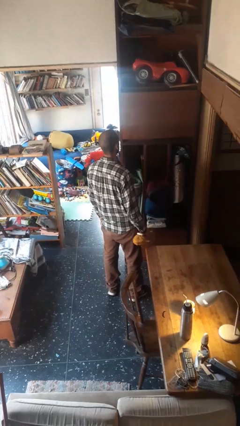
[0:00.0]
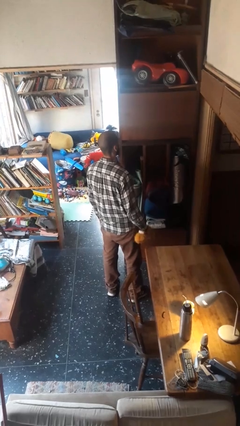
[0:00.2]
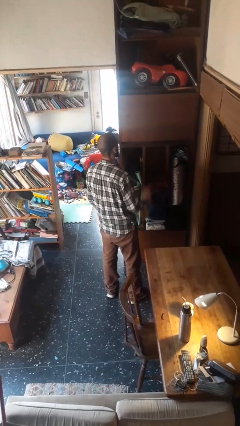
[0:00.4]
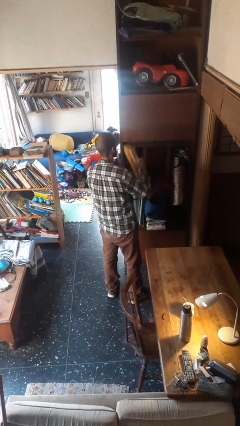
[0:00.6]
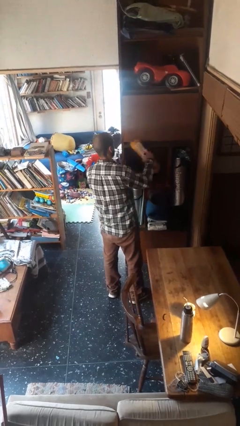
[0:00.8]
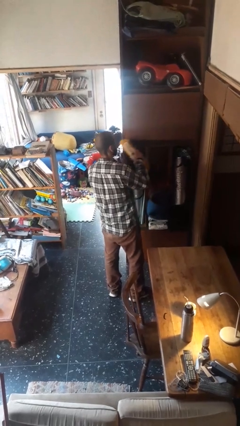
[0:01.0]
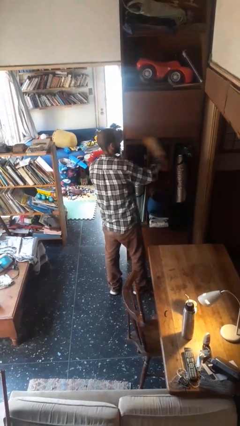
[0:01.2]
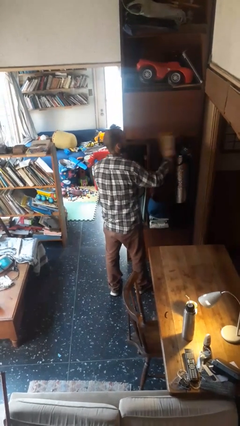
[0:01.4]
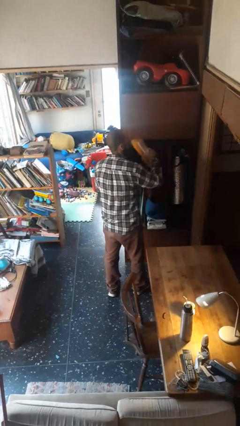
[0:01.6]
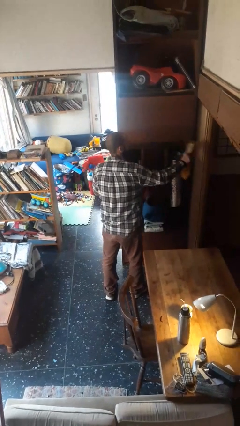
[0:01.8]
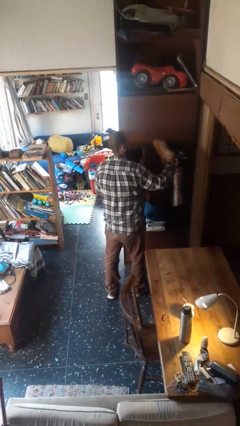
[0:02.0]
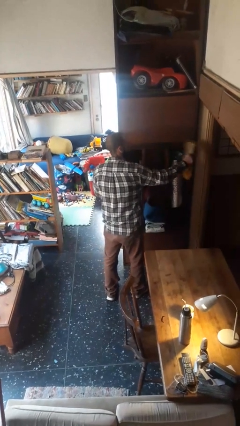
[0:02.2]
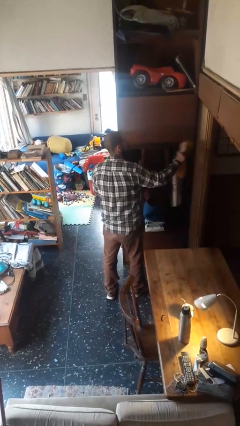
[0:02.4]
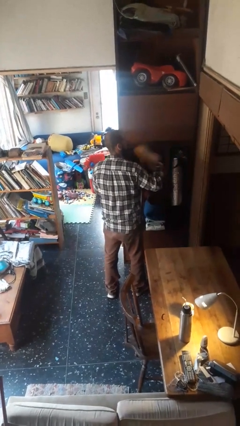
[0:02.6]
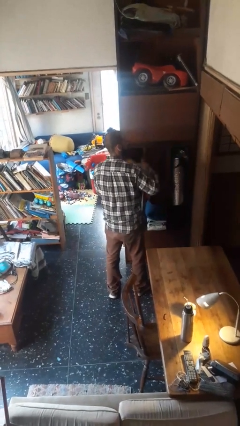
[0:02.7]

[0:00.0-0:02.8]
person dusts furniture

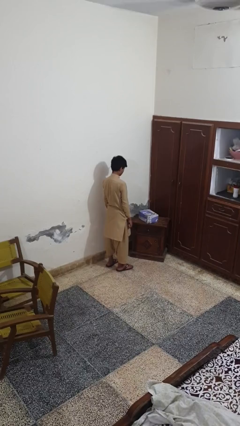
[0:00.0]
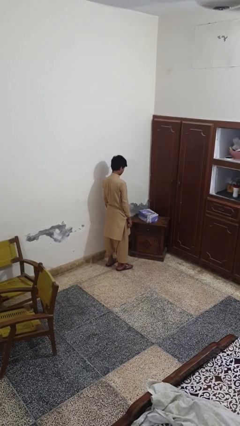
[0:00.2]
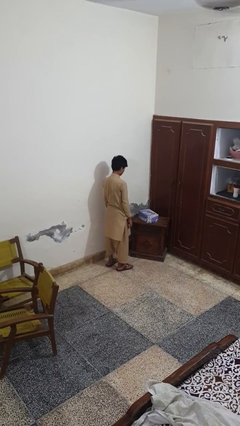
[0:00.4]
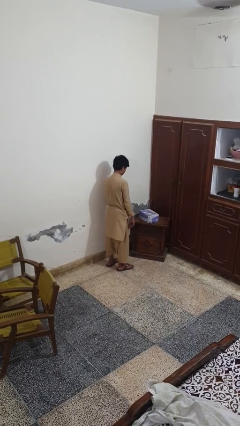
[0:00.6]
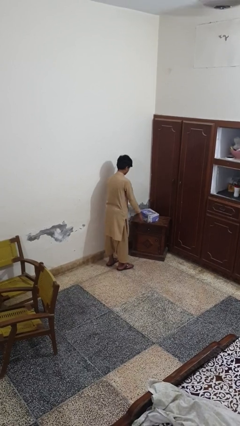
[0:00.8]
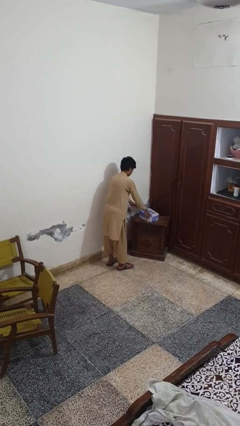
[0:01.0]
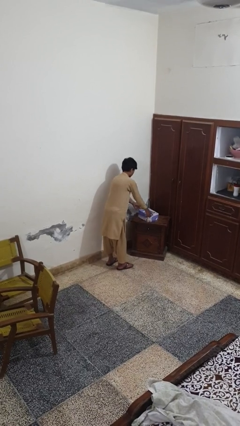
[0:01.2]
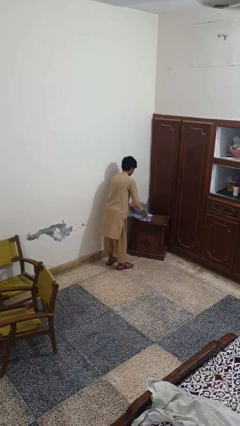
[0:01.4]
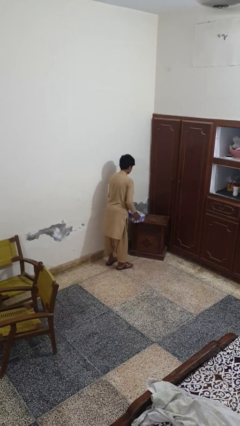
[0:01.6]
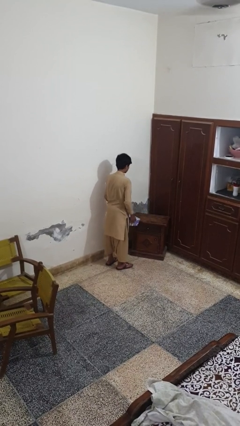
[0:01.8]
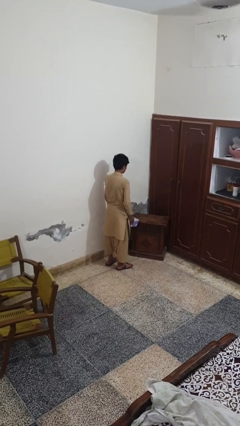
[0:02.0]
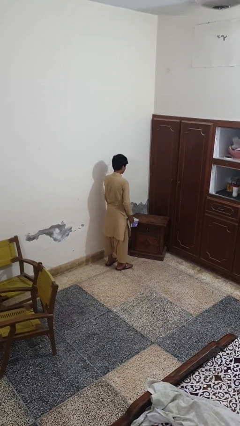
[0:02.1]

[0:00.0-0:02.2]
person picks up object from table

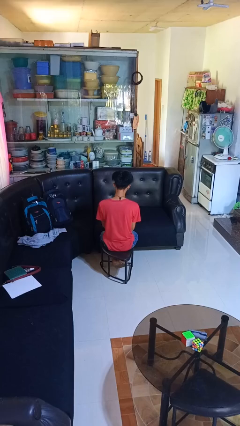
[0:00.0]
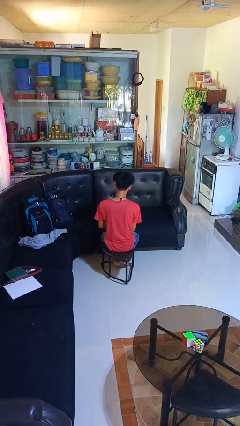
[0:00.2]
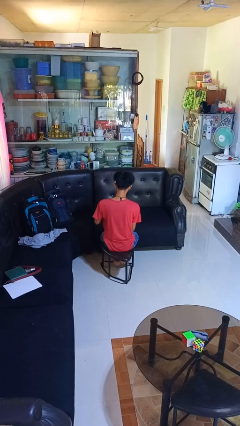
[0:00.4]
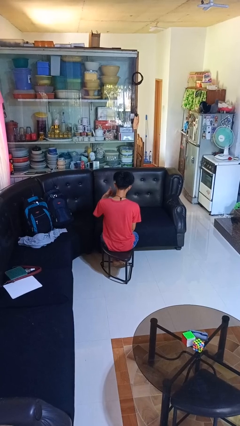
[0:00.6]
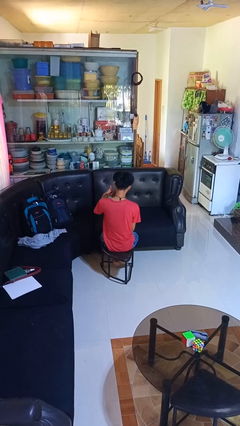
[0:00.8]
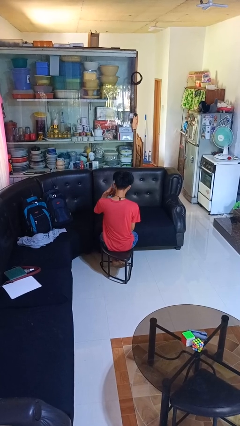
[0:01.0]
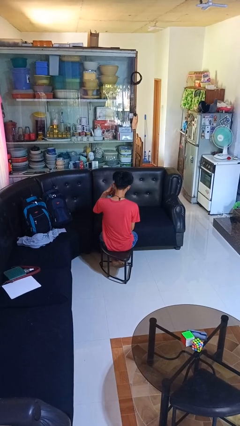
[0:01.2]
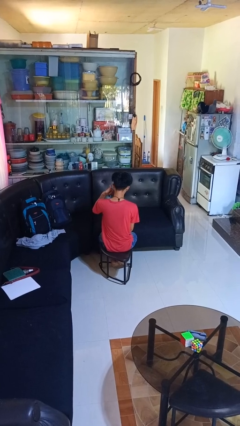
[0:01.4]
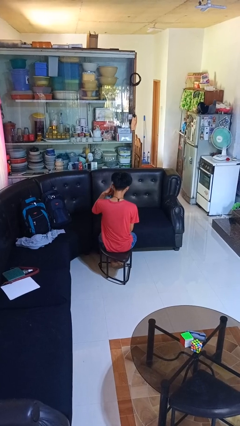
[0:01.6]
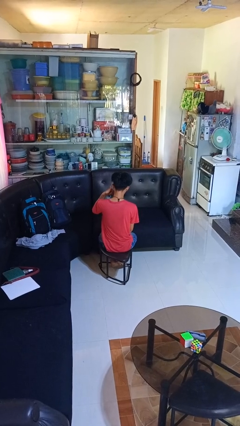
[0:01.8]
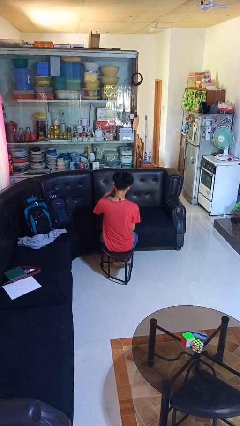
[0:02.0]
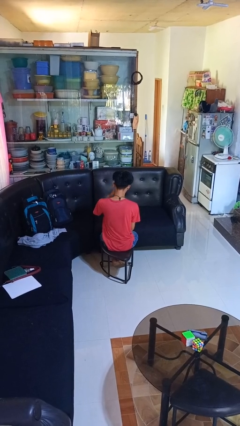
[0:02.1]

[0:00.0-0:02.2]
person gestures call me

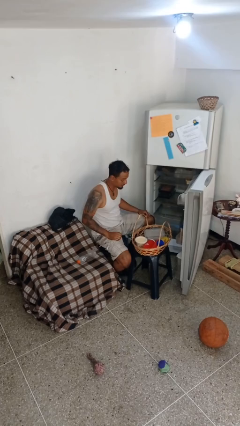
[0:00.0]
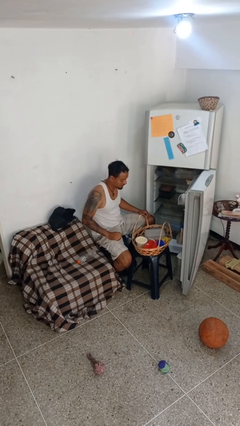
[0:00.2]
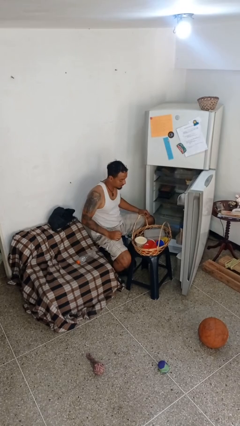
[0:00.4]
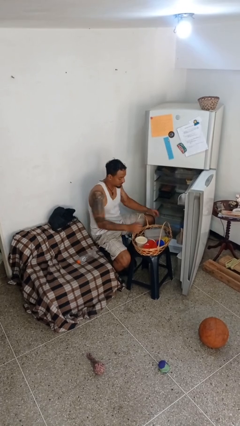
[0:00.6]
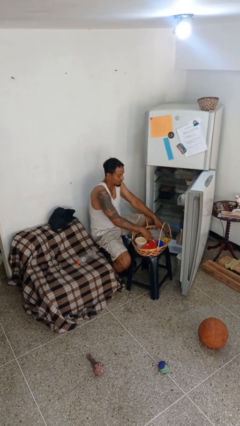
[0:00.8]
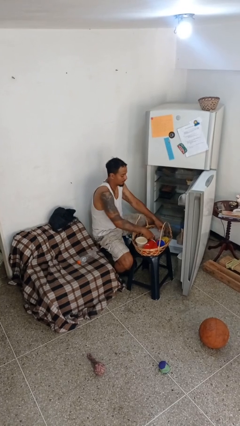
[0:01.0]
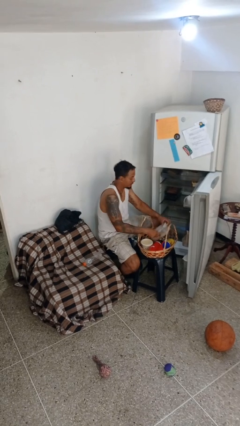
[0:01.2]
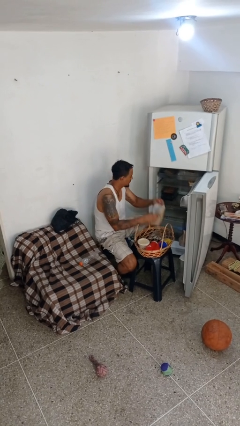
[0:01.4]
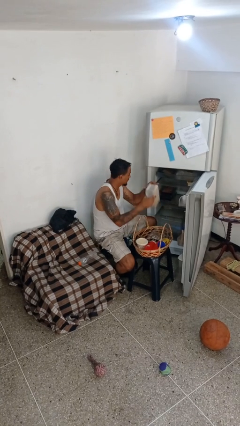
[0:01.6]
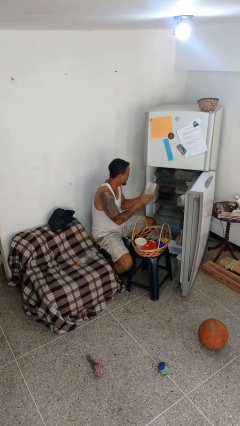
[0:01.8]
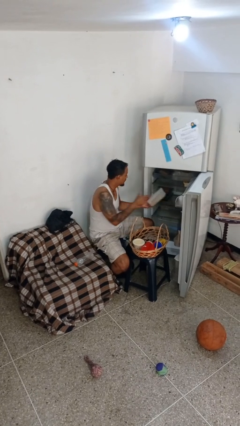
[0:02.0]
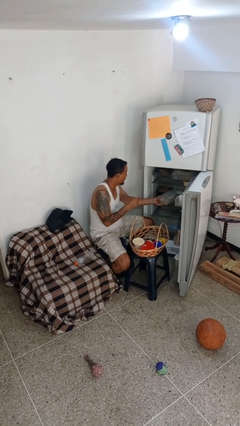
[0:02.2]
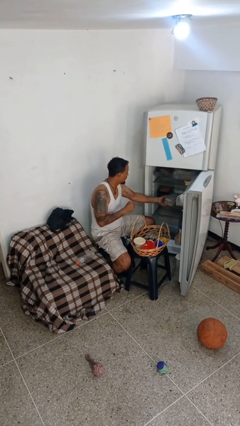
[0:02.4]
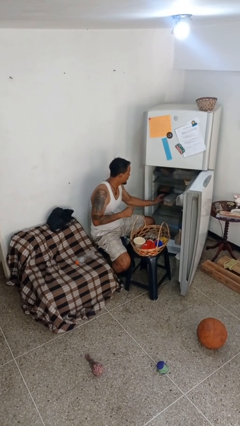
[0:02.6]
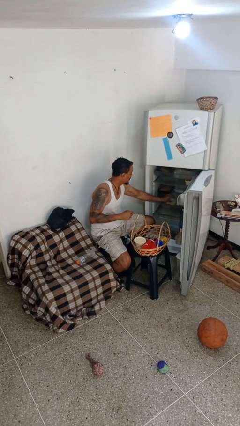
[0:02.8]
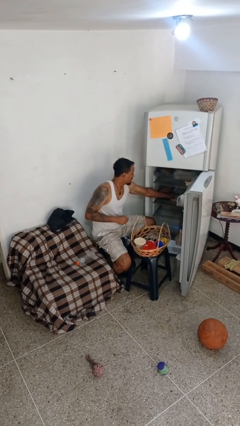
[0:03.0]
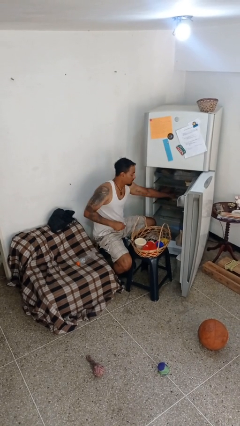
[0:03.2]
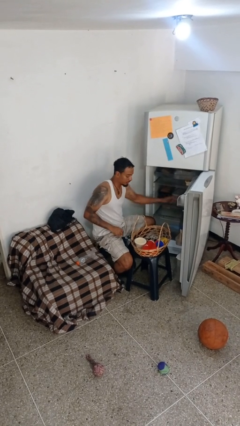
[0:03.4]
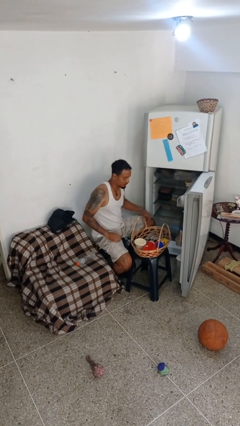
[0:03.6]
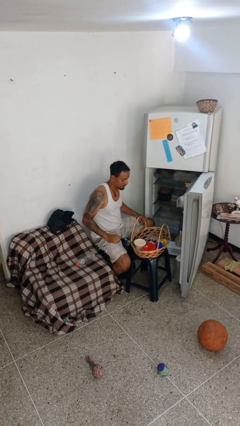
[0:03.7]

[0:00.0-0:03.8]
person loads groceries into refrigerator

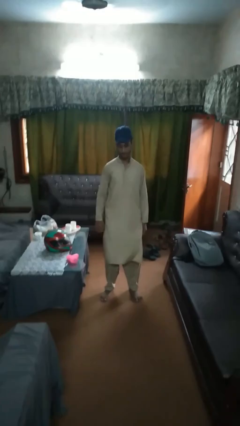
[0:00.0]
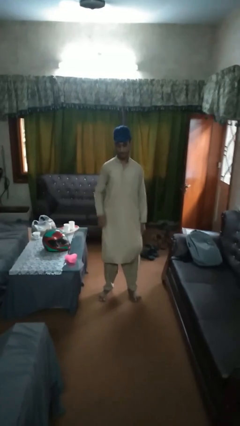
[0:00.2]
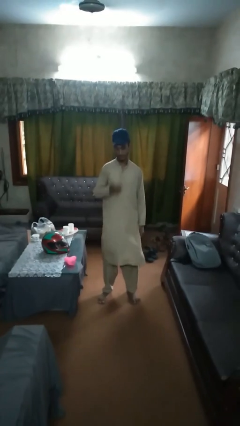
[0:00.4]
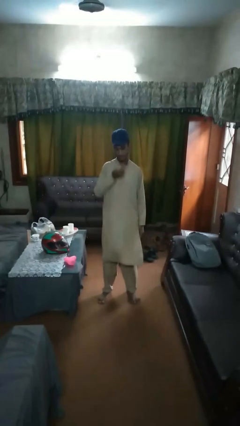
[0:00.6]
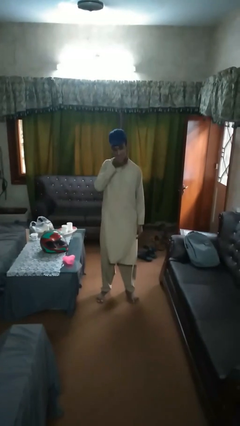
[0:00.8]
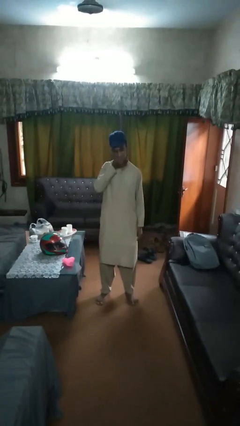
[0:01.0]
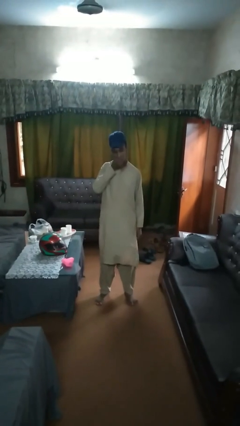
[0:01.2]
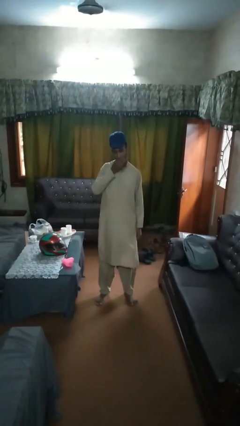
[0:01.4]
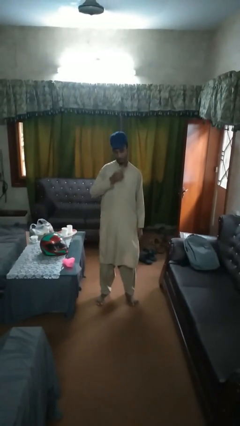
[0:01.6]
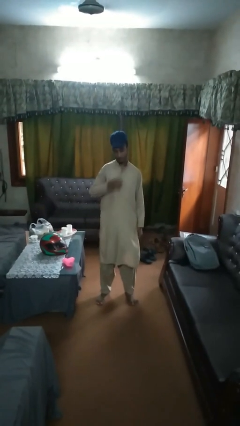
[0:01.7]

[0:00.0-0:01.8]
person eats banana

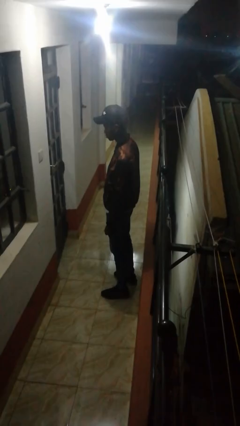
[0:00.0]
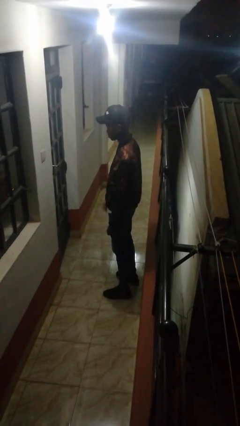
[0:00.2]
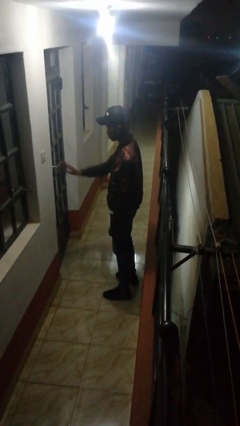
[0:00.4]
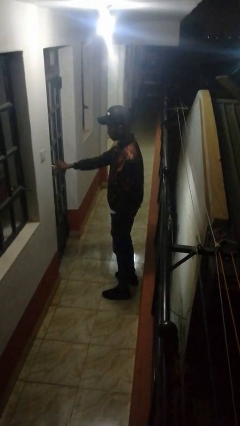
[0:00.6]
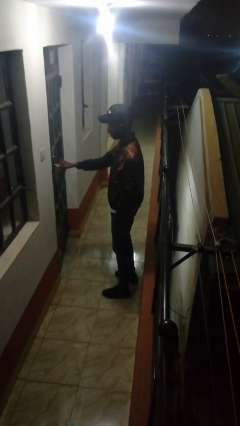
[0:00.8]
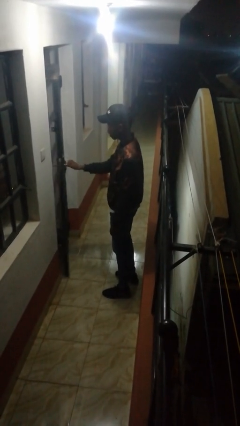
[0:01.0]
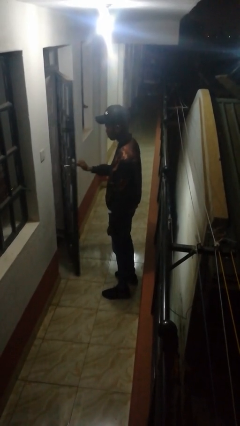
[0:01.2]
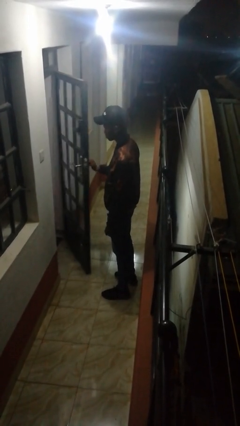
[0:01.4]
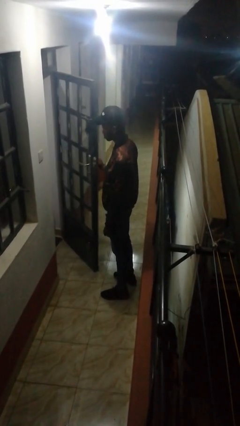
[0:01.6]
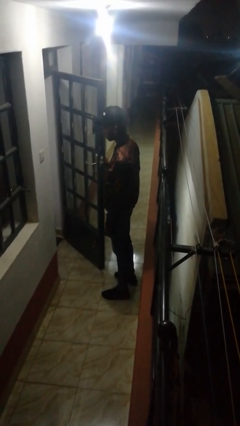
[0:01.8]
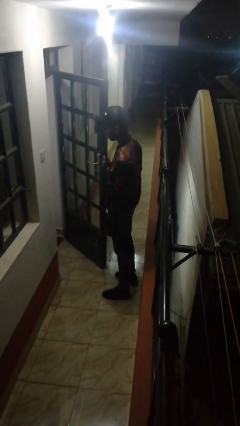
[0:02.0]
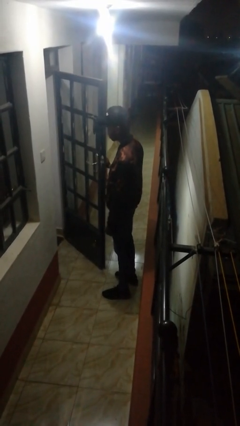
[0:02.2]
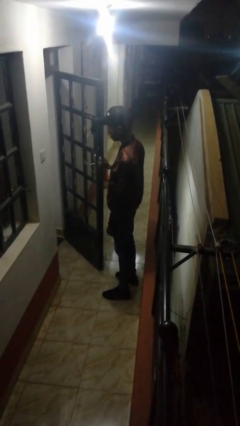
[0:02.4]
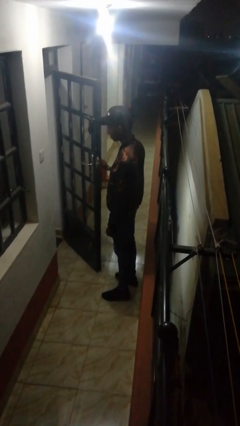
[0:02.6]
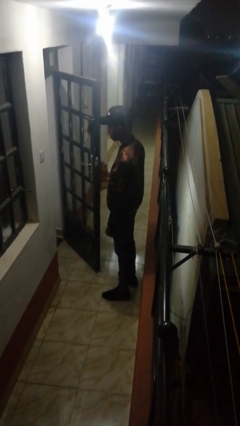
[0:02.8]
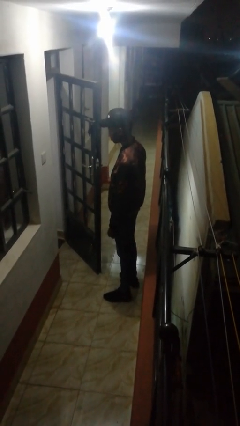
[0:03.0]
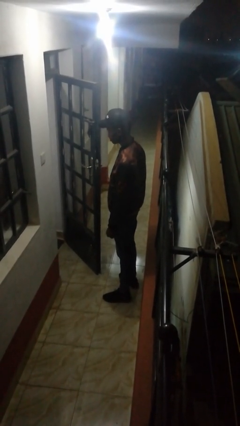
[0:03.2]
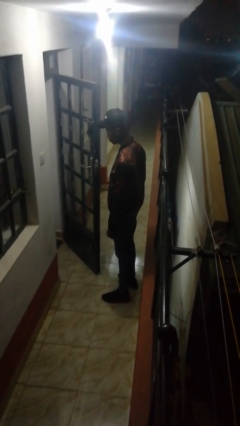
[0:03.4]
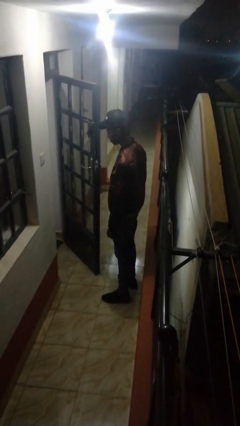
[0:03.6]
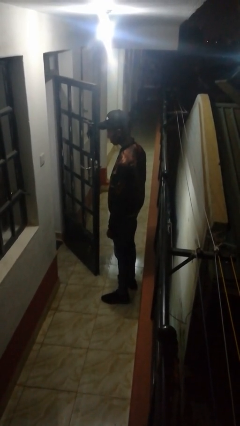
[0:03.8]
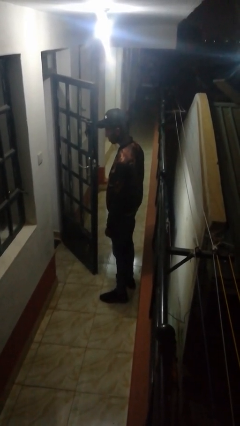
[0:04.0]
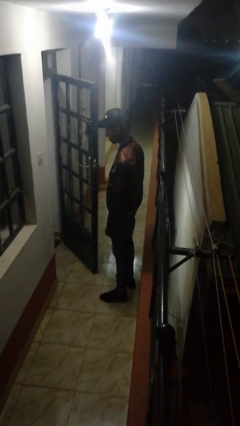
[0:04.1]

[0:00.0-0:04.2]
person opens facility door

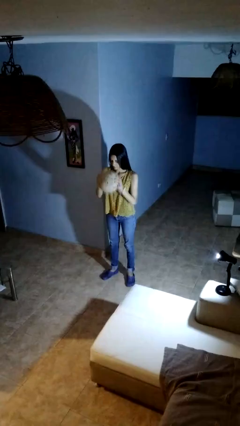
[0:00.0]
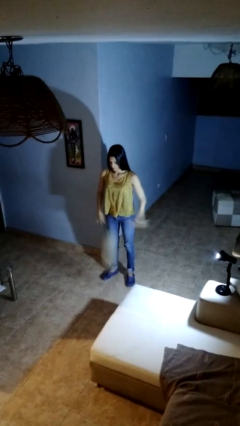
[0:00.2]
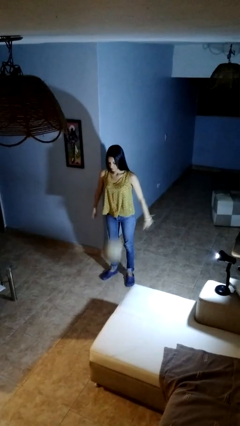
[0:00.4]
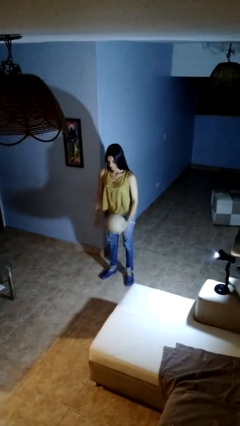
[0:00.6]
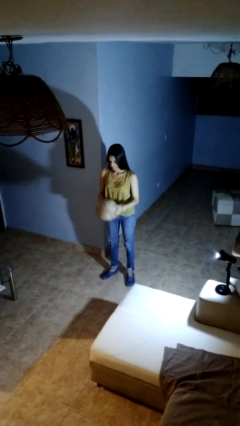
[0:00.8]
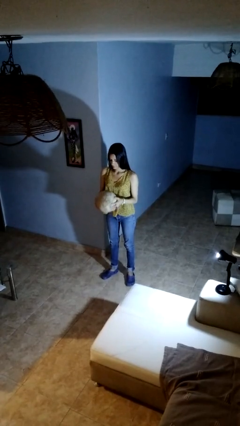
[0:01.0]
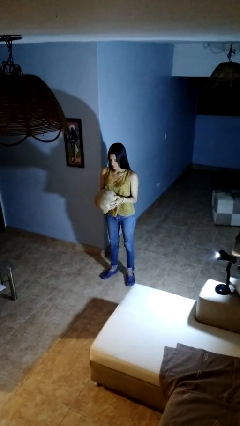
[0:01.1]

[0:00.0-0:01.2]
person bounces ball on floor
